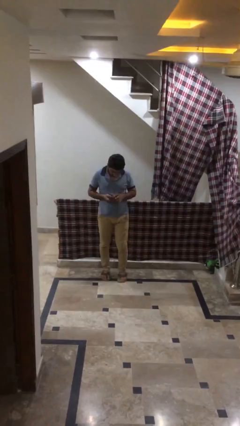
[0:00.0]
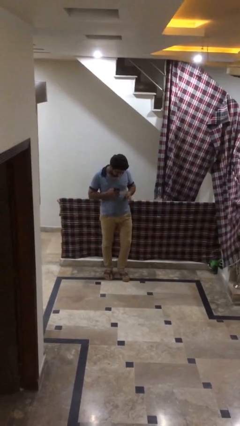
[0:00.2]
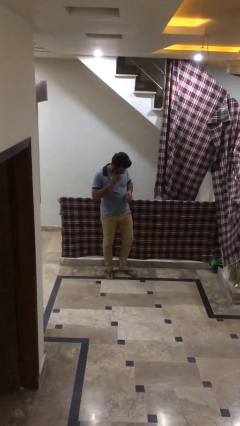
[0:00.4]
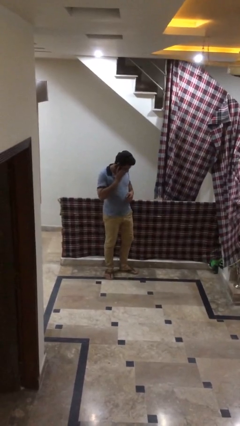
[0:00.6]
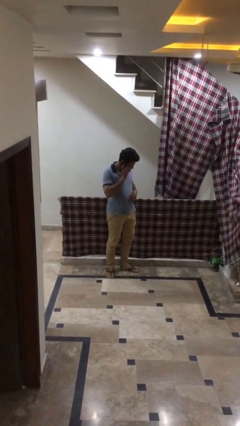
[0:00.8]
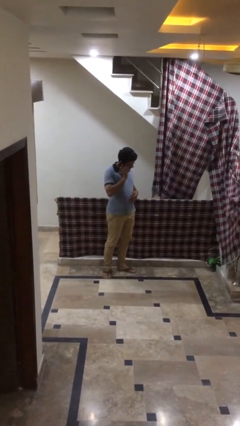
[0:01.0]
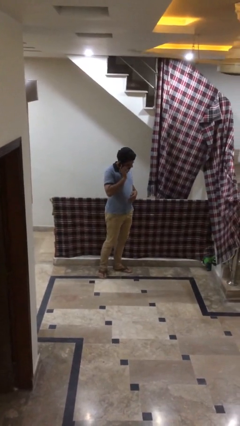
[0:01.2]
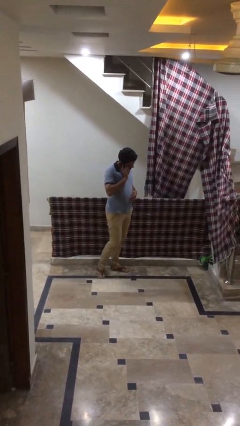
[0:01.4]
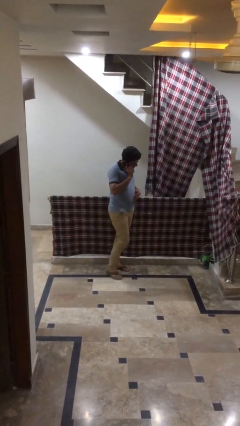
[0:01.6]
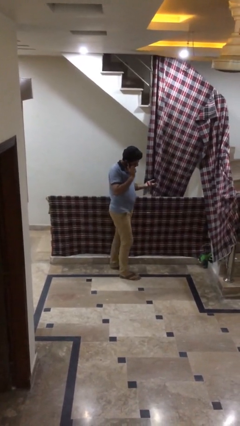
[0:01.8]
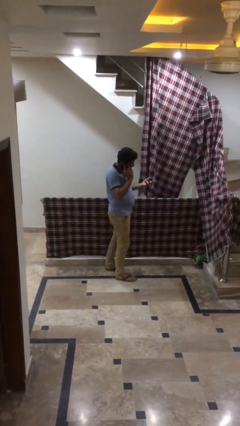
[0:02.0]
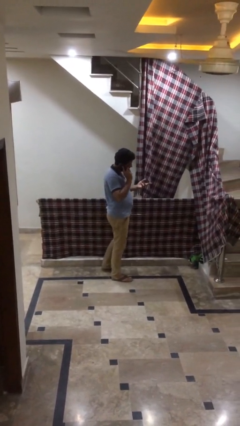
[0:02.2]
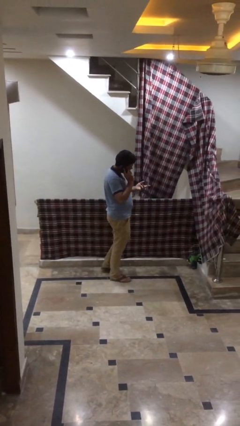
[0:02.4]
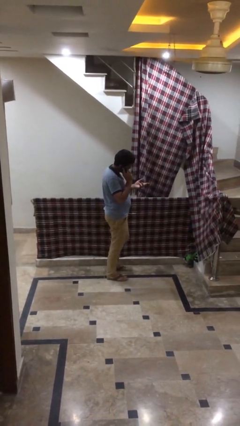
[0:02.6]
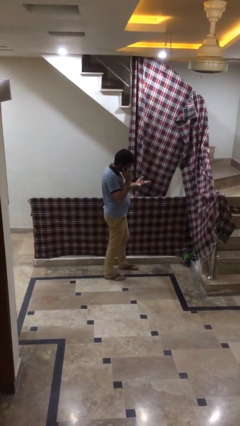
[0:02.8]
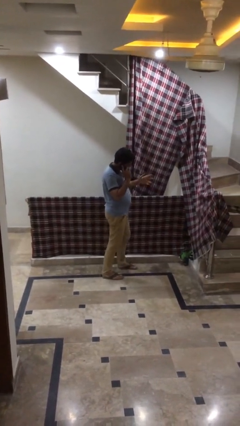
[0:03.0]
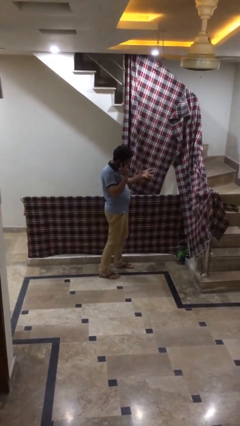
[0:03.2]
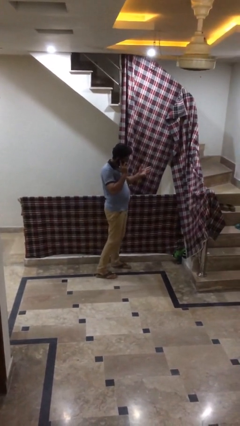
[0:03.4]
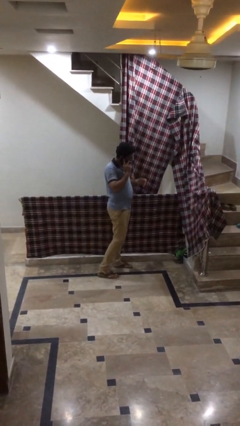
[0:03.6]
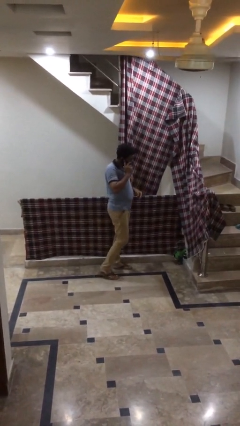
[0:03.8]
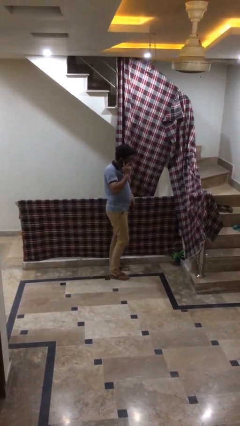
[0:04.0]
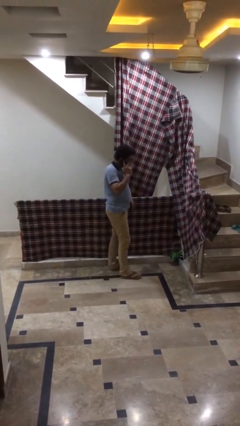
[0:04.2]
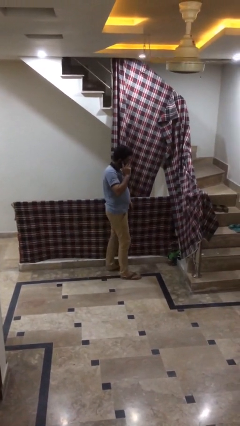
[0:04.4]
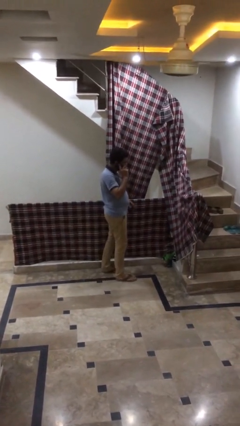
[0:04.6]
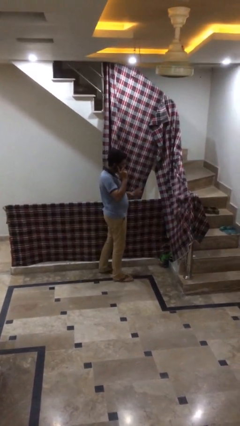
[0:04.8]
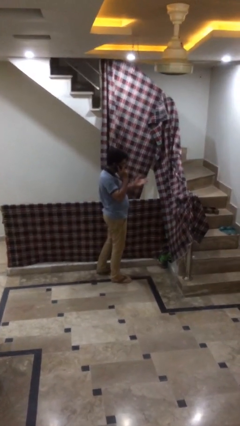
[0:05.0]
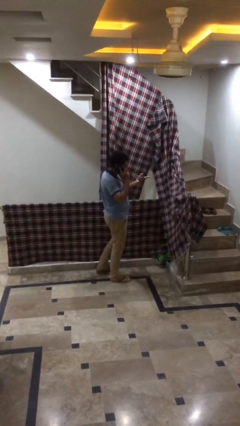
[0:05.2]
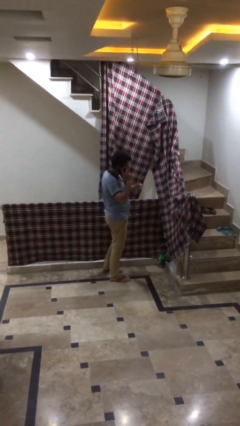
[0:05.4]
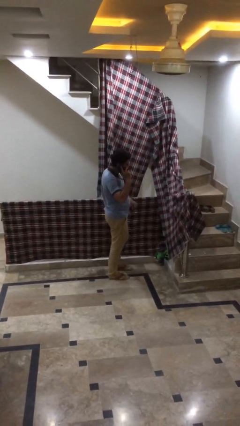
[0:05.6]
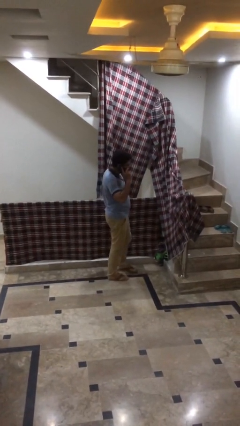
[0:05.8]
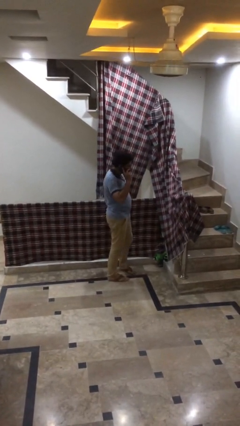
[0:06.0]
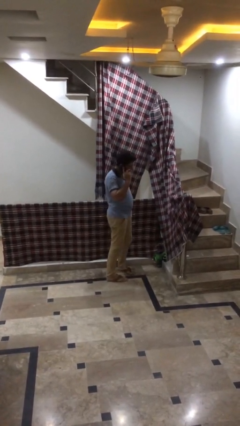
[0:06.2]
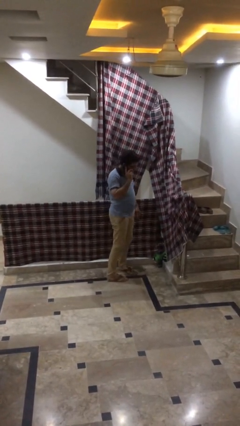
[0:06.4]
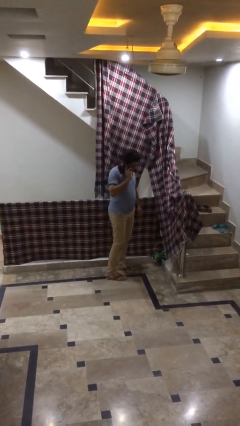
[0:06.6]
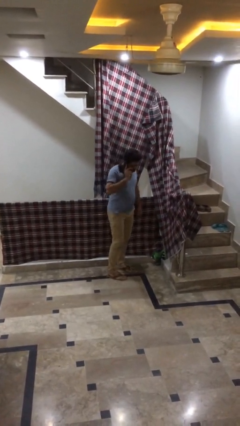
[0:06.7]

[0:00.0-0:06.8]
person talks on phone

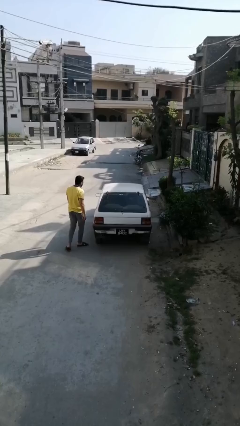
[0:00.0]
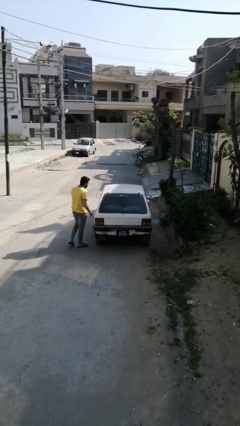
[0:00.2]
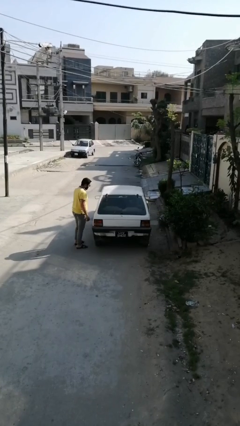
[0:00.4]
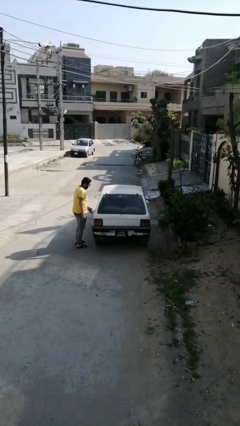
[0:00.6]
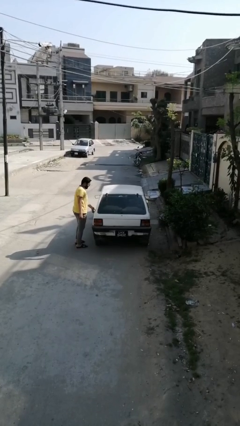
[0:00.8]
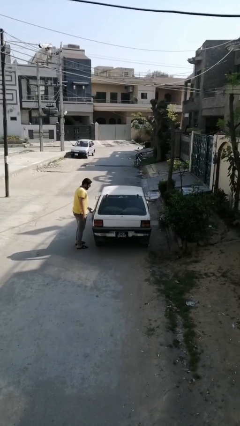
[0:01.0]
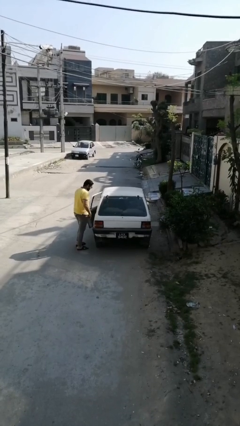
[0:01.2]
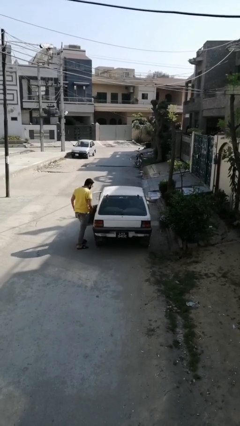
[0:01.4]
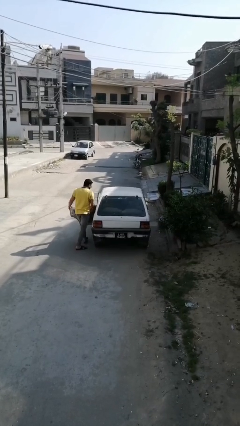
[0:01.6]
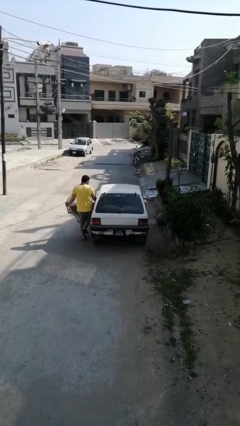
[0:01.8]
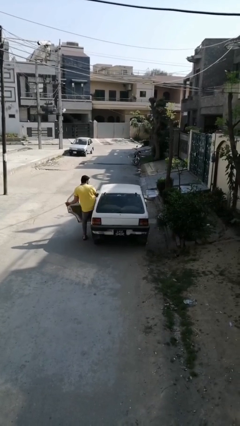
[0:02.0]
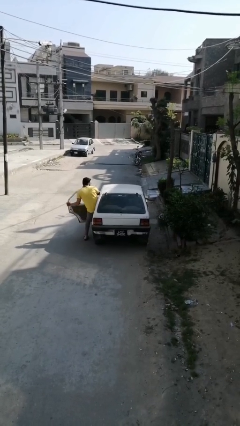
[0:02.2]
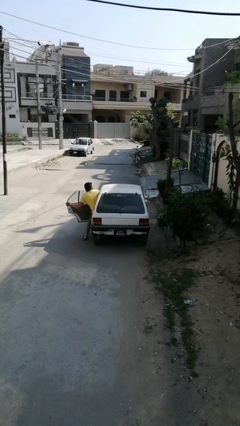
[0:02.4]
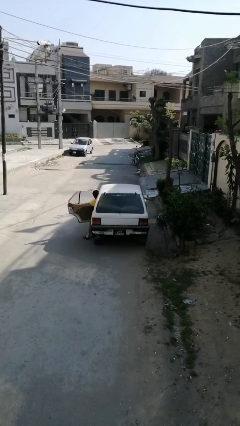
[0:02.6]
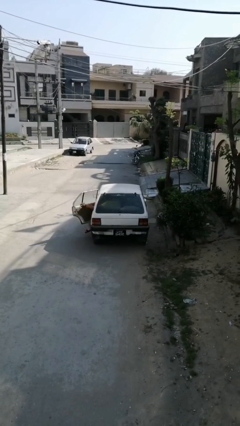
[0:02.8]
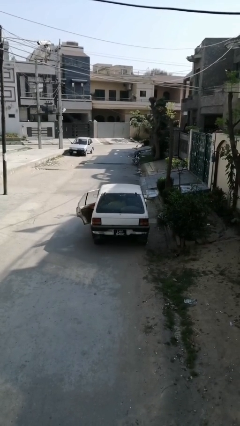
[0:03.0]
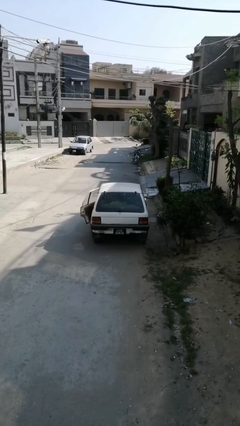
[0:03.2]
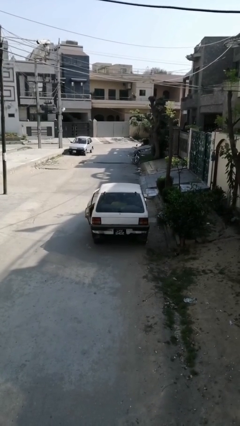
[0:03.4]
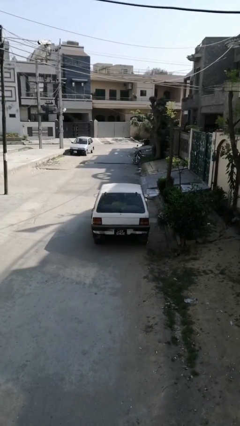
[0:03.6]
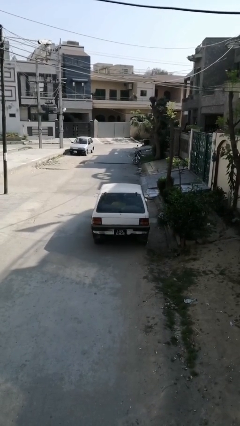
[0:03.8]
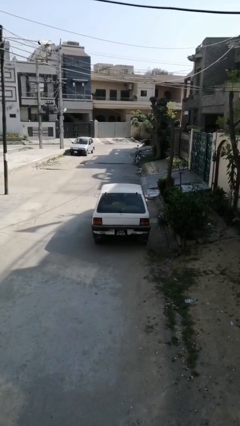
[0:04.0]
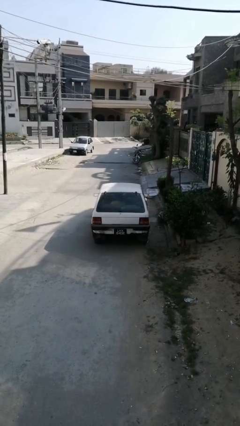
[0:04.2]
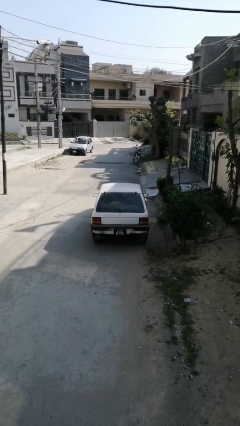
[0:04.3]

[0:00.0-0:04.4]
car picks up person

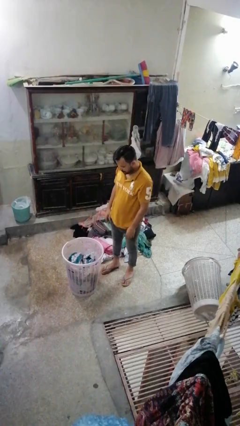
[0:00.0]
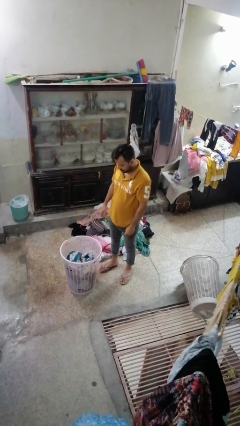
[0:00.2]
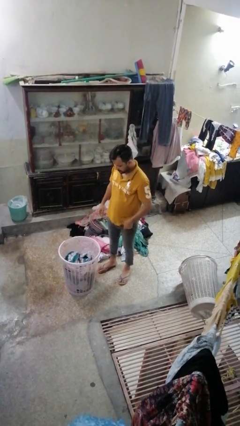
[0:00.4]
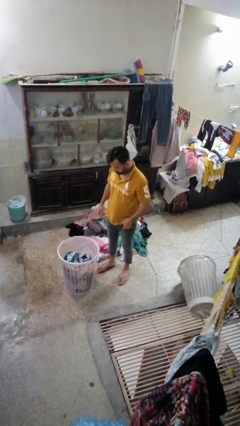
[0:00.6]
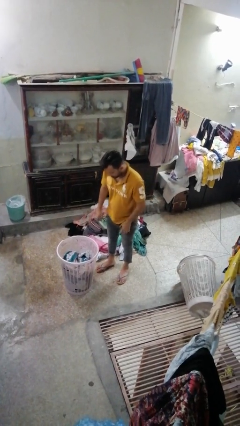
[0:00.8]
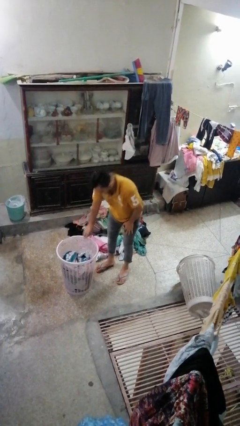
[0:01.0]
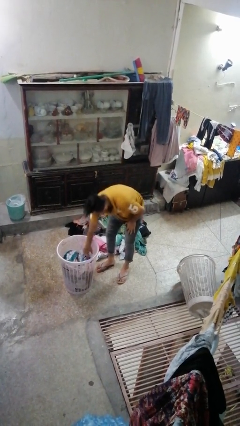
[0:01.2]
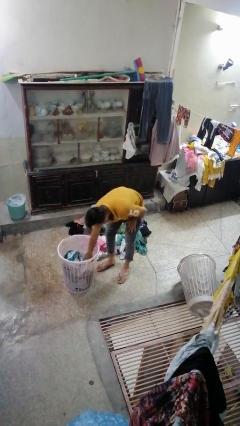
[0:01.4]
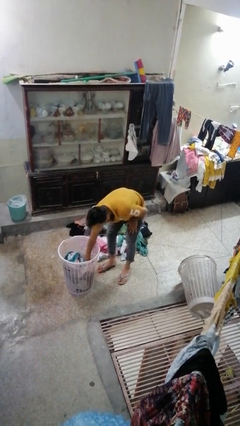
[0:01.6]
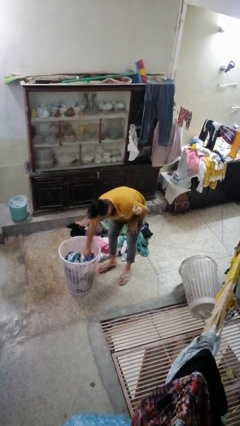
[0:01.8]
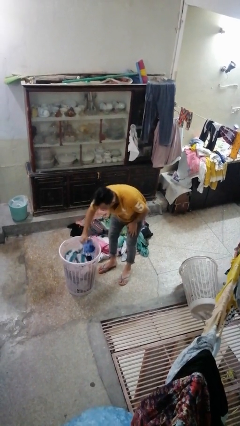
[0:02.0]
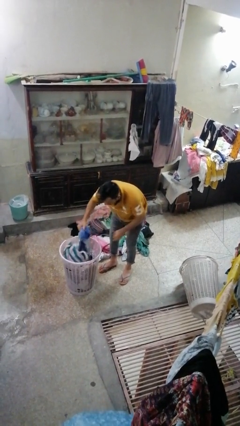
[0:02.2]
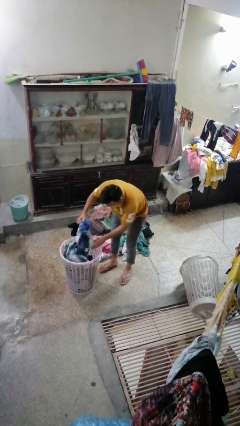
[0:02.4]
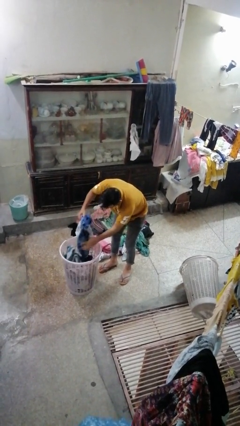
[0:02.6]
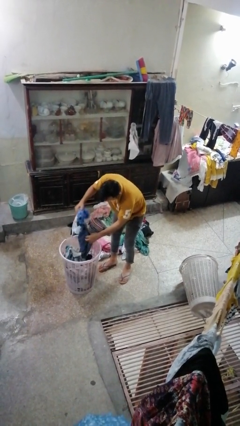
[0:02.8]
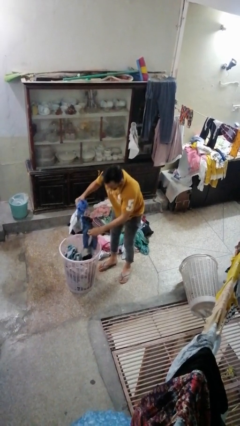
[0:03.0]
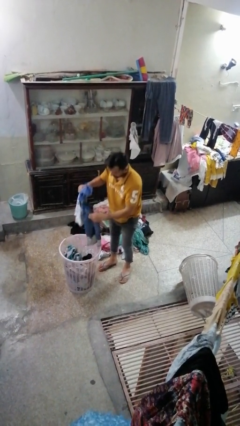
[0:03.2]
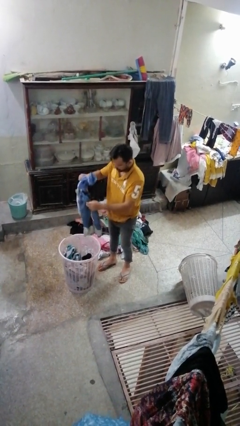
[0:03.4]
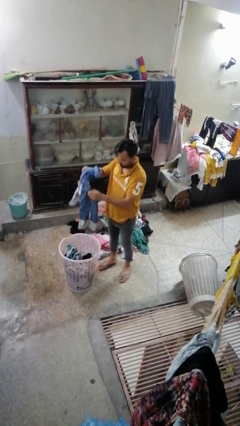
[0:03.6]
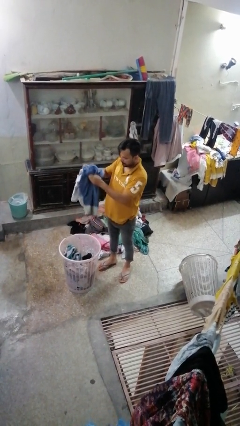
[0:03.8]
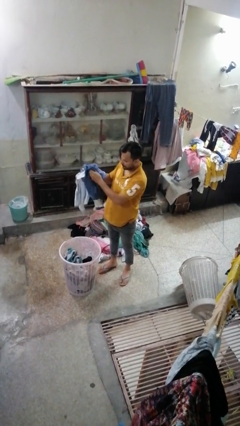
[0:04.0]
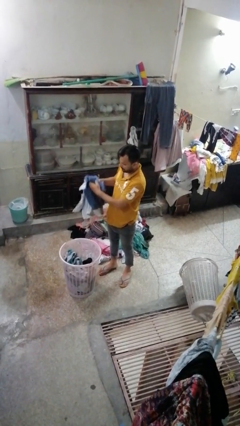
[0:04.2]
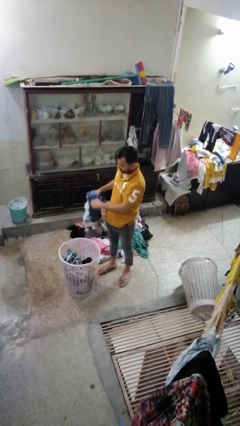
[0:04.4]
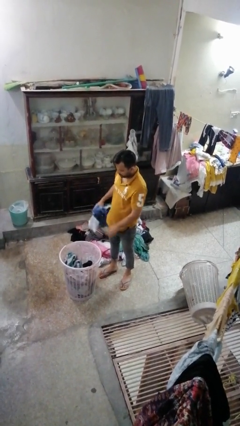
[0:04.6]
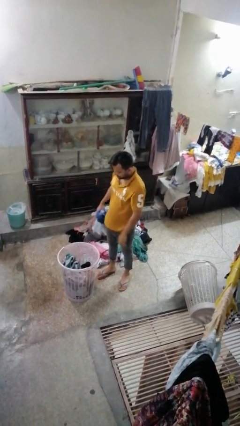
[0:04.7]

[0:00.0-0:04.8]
person takes object from basket

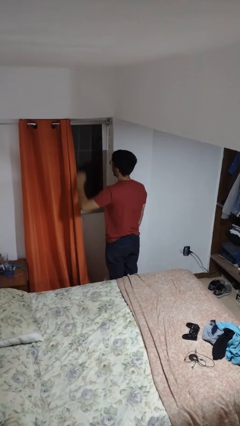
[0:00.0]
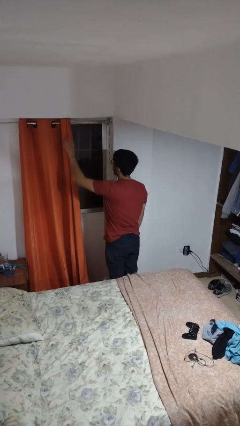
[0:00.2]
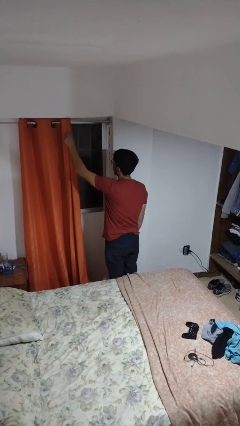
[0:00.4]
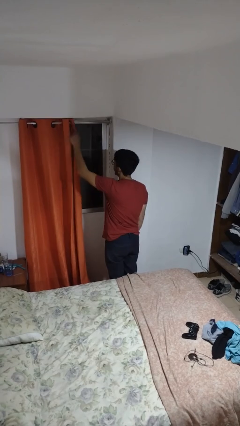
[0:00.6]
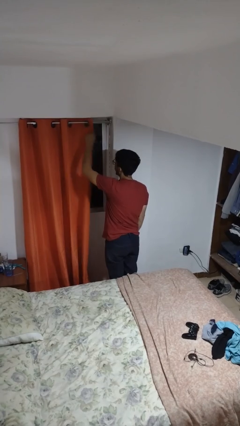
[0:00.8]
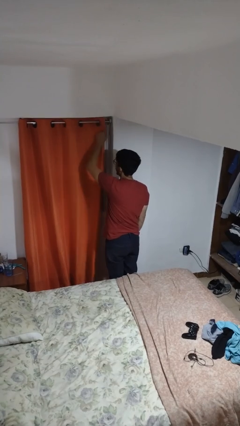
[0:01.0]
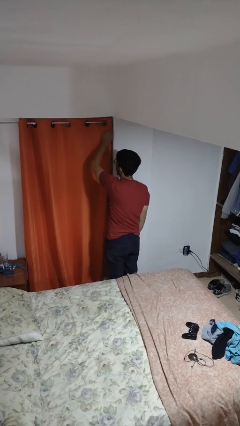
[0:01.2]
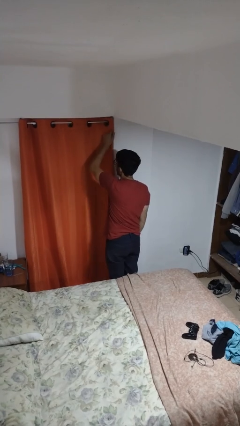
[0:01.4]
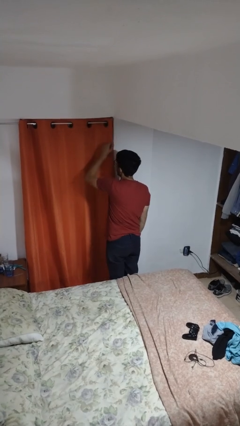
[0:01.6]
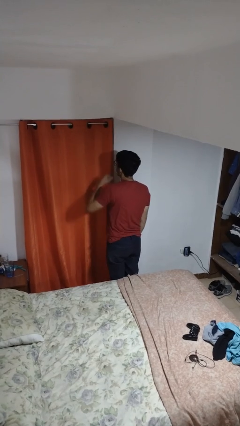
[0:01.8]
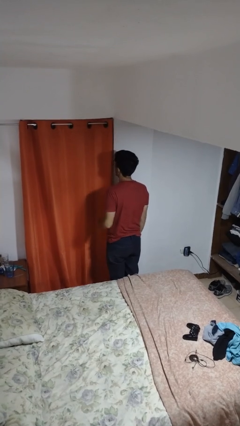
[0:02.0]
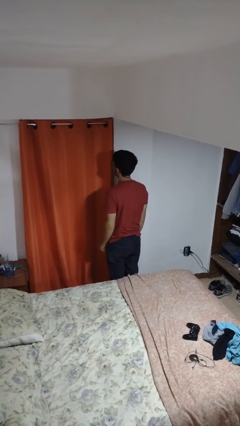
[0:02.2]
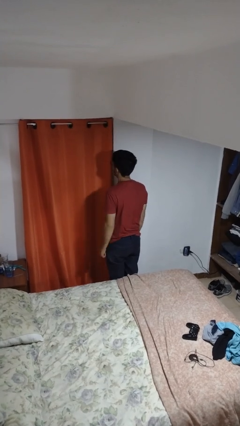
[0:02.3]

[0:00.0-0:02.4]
person closes curtains
